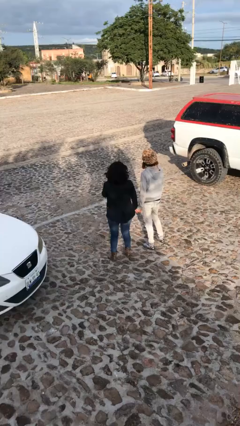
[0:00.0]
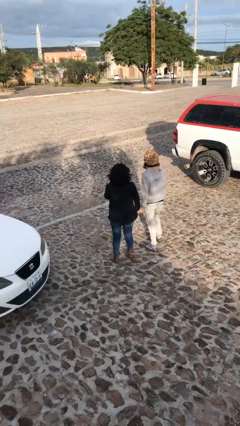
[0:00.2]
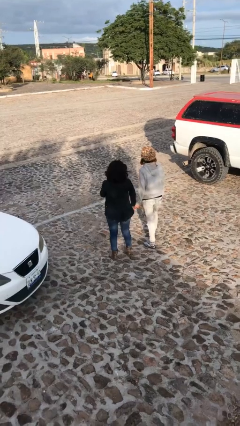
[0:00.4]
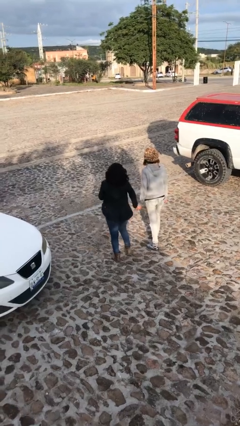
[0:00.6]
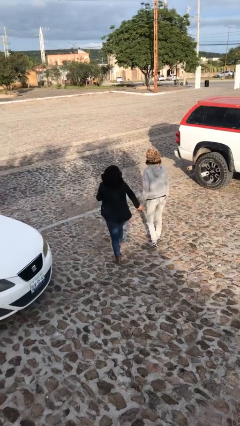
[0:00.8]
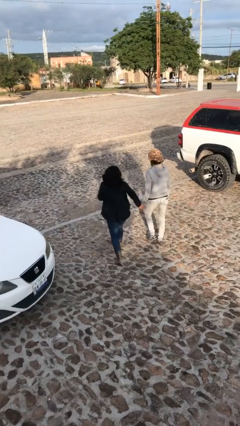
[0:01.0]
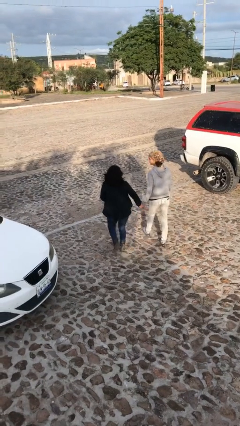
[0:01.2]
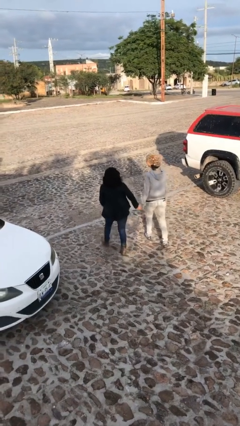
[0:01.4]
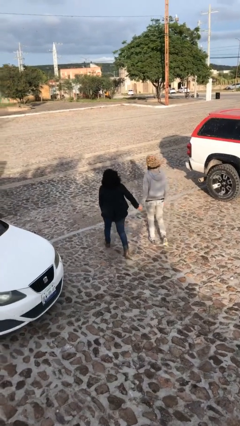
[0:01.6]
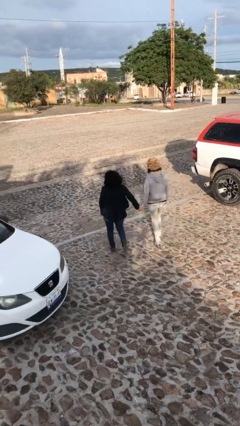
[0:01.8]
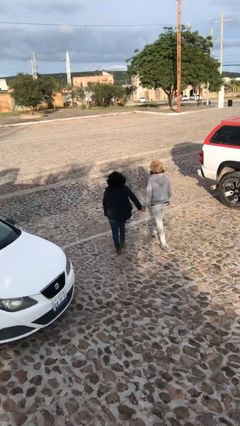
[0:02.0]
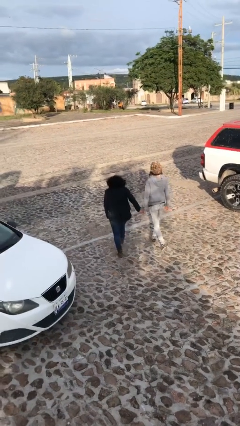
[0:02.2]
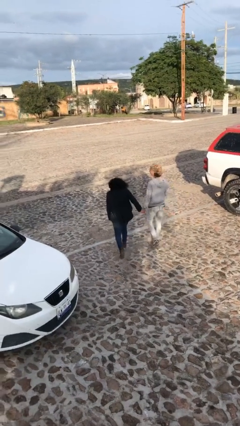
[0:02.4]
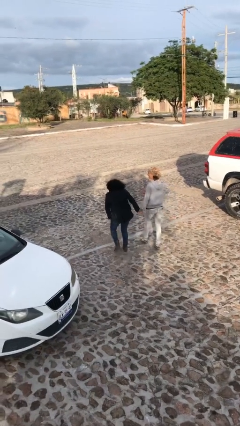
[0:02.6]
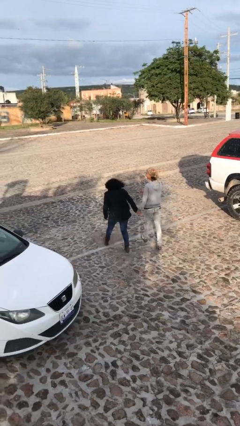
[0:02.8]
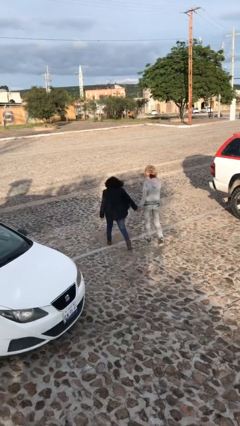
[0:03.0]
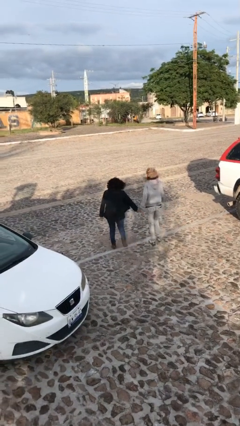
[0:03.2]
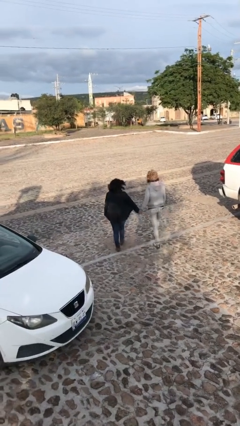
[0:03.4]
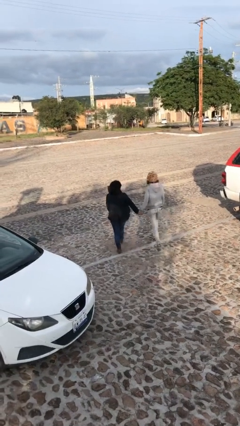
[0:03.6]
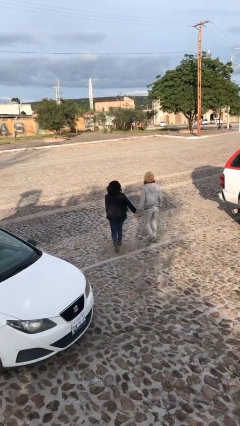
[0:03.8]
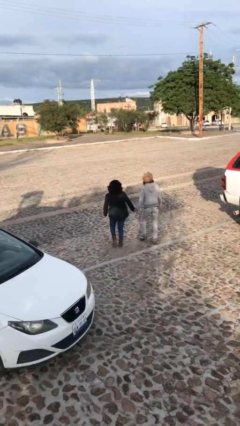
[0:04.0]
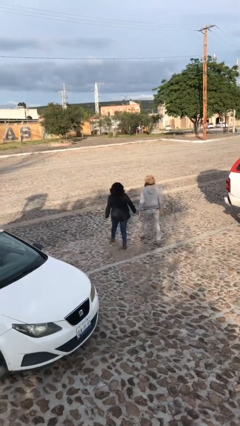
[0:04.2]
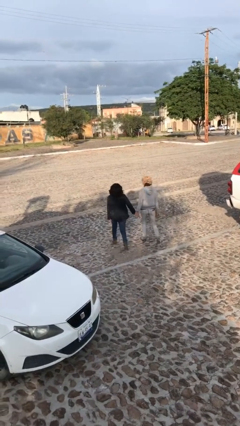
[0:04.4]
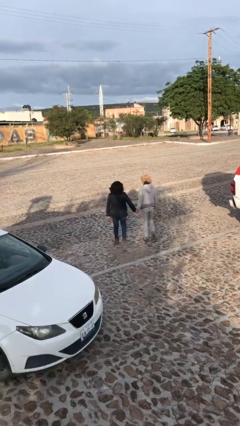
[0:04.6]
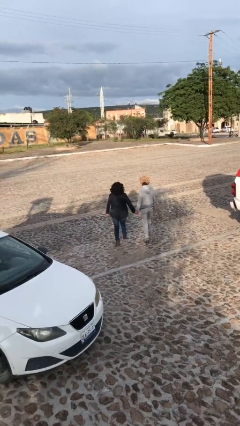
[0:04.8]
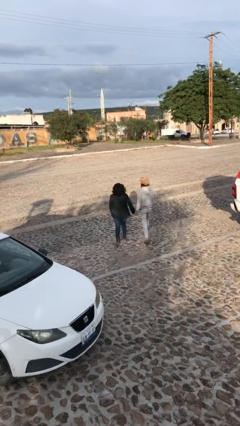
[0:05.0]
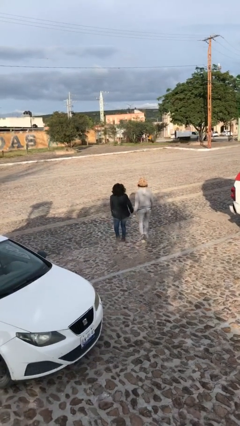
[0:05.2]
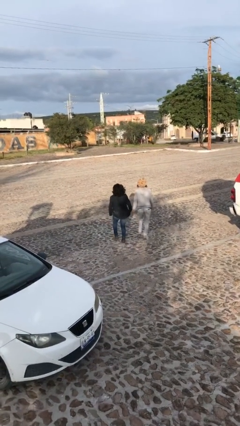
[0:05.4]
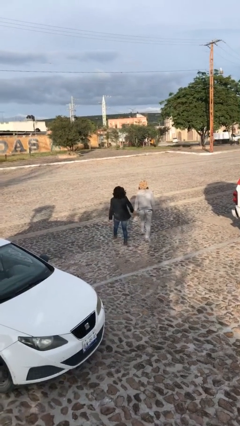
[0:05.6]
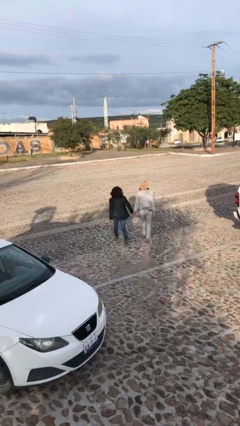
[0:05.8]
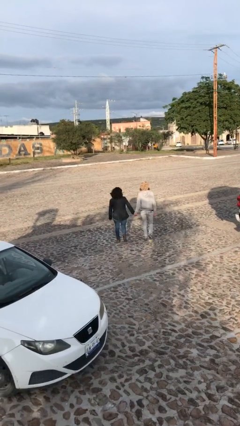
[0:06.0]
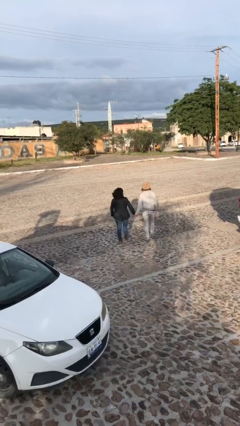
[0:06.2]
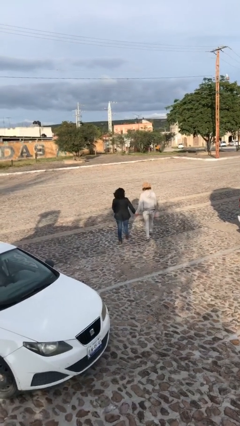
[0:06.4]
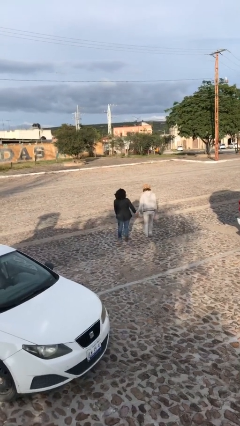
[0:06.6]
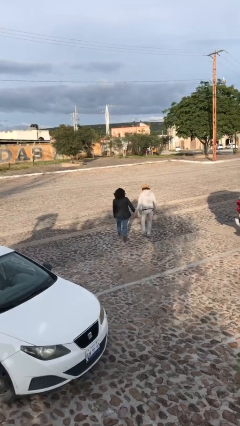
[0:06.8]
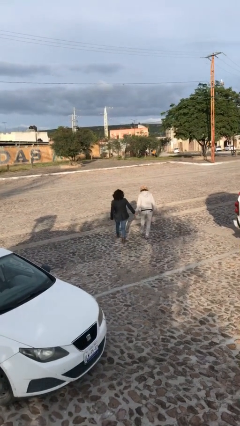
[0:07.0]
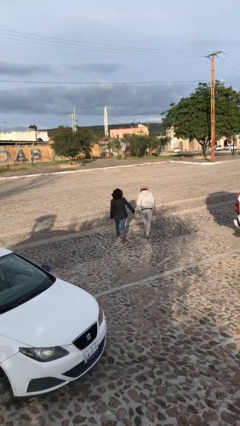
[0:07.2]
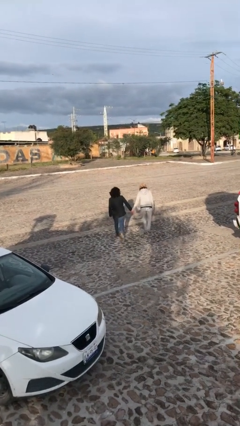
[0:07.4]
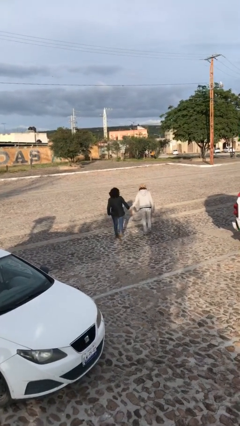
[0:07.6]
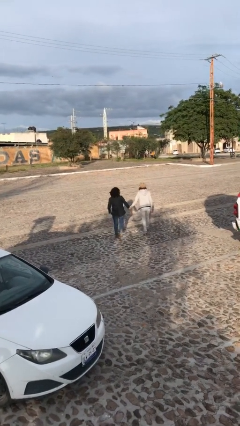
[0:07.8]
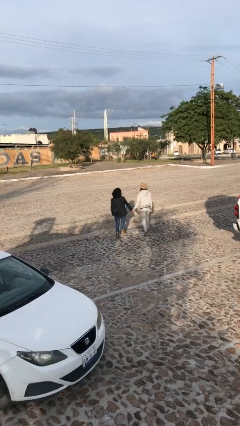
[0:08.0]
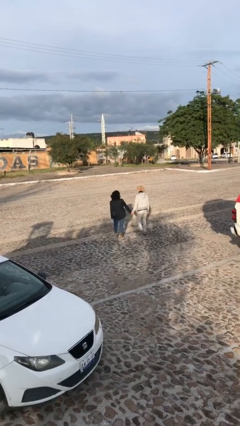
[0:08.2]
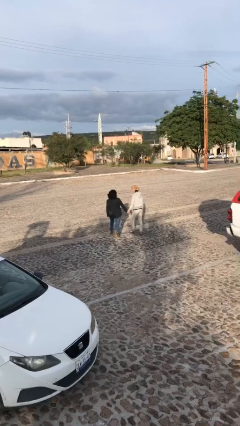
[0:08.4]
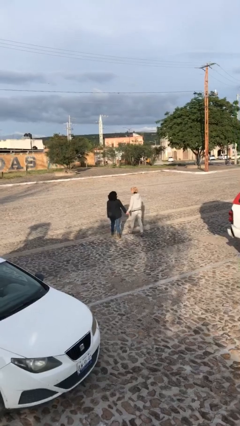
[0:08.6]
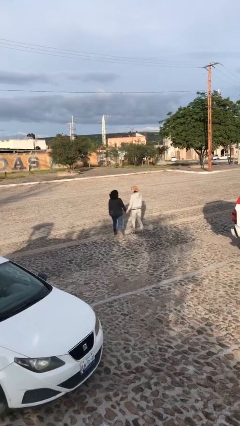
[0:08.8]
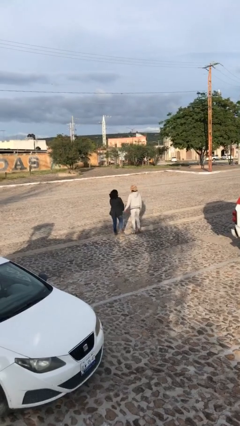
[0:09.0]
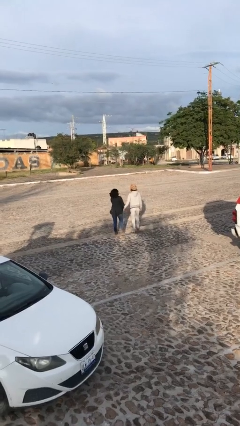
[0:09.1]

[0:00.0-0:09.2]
person holds hand

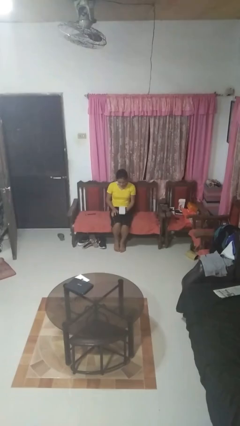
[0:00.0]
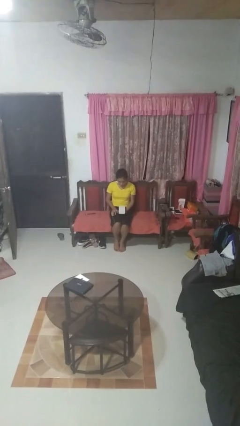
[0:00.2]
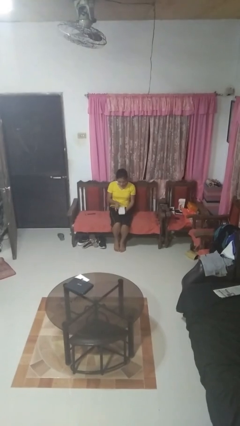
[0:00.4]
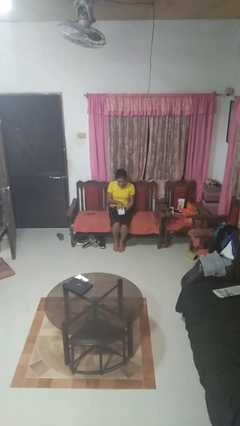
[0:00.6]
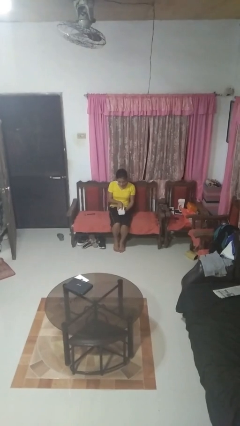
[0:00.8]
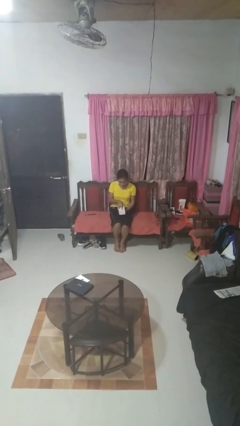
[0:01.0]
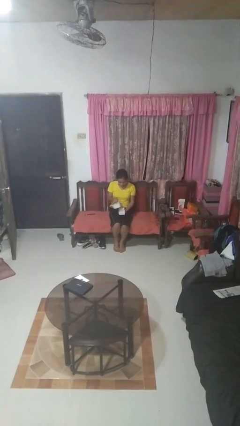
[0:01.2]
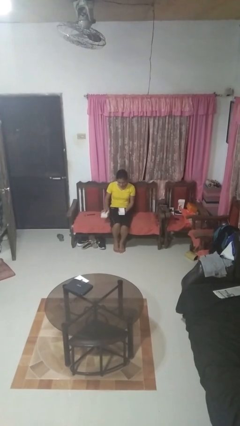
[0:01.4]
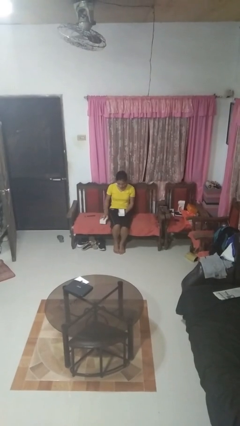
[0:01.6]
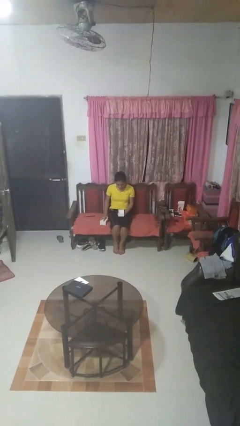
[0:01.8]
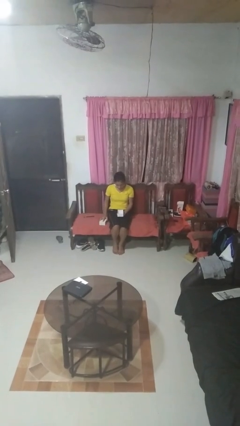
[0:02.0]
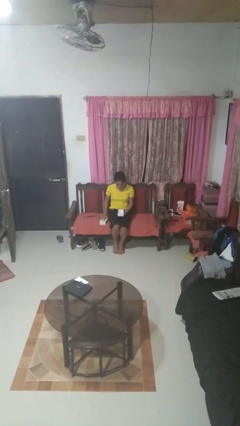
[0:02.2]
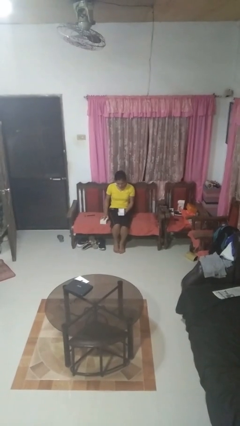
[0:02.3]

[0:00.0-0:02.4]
person opens jewelry box

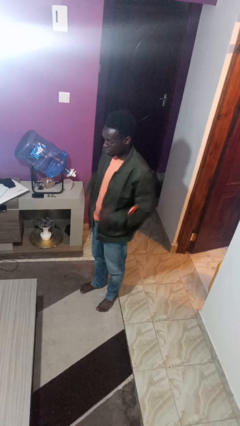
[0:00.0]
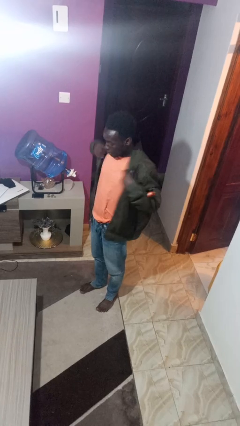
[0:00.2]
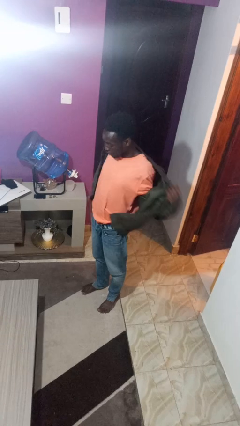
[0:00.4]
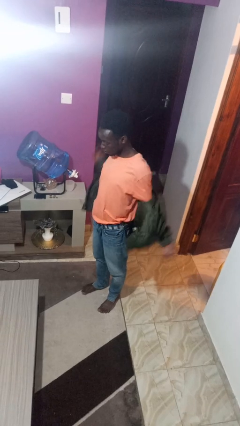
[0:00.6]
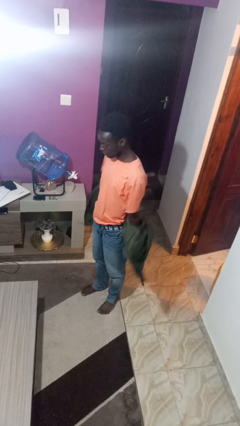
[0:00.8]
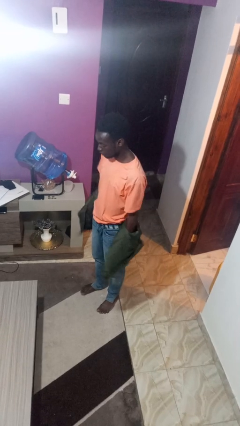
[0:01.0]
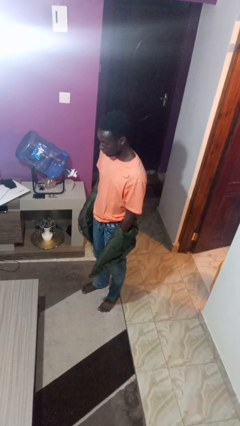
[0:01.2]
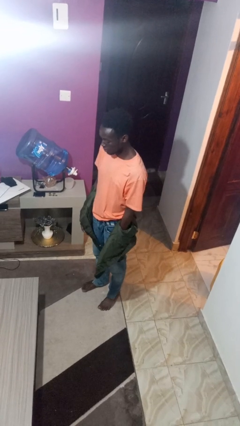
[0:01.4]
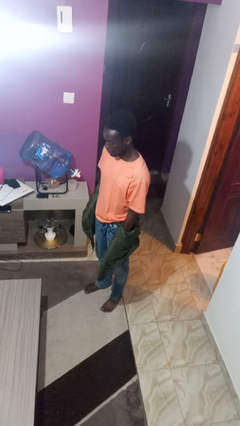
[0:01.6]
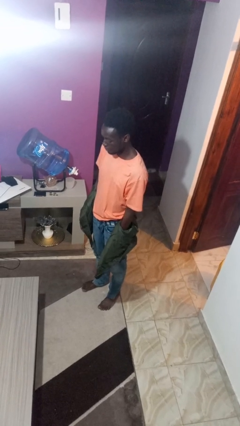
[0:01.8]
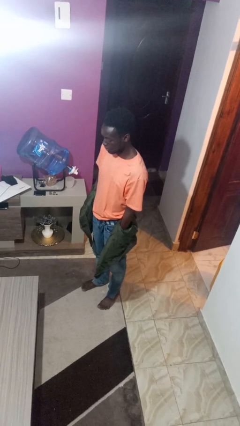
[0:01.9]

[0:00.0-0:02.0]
person takes off jacket

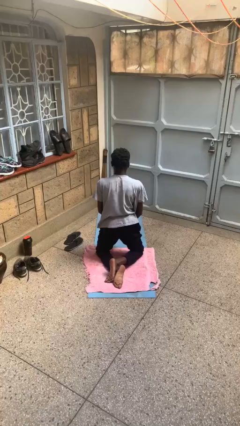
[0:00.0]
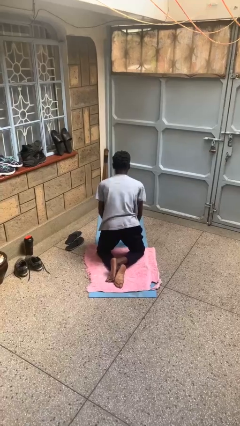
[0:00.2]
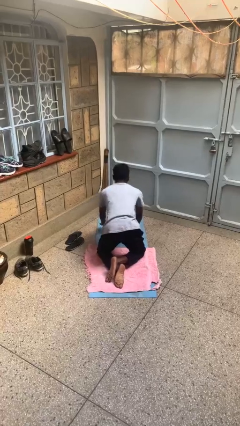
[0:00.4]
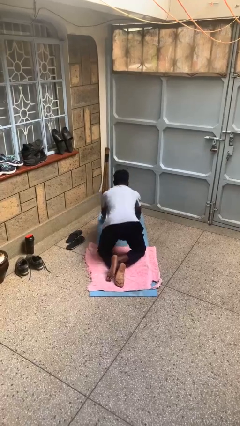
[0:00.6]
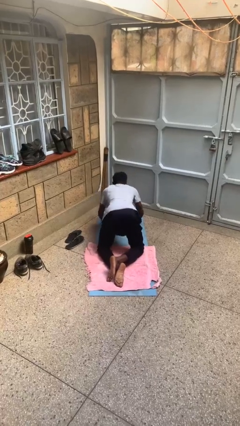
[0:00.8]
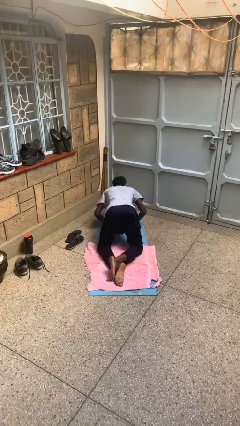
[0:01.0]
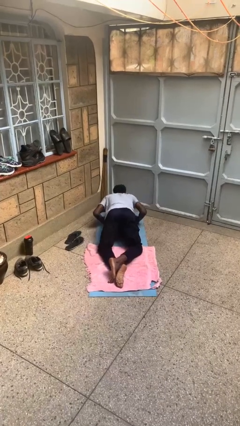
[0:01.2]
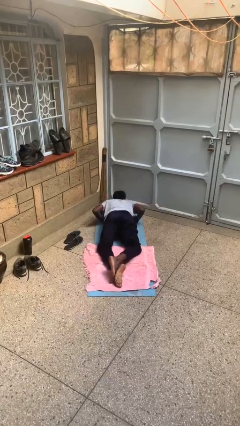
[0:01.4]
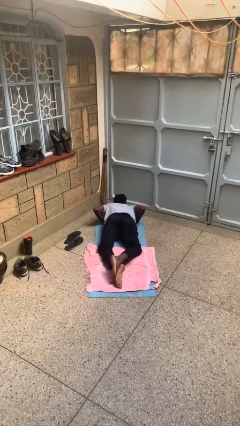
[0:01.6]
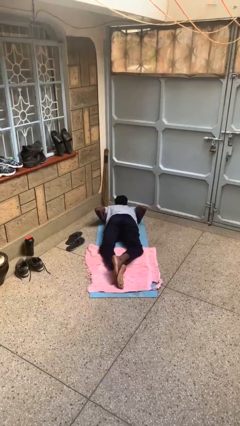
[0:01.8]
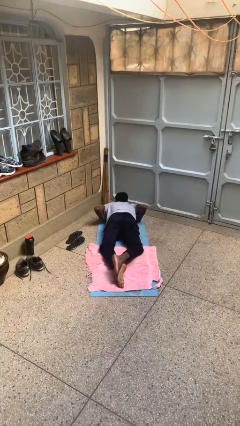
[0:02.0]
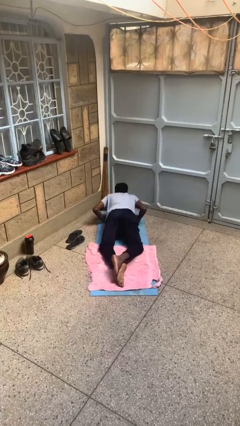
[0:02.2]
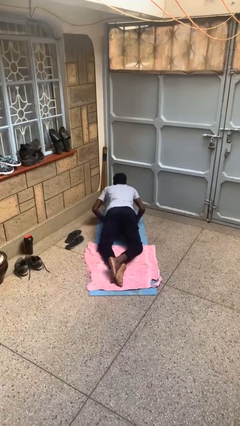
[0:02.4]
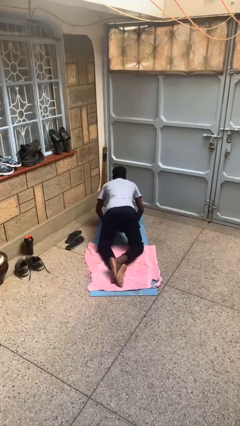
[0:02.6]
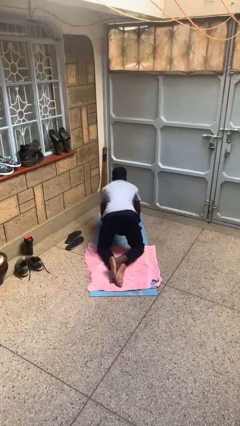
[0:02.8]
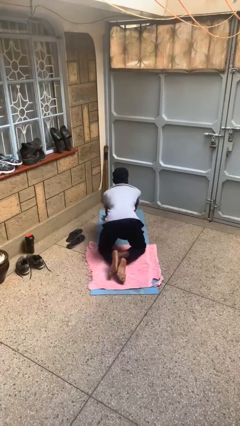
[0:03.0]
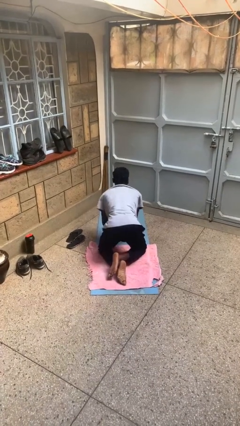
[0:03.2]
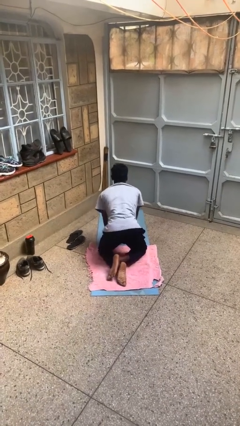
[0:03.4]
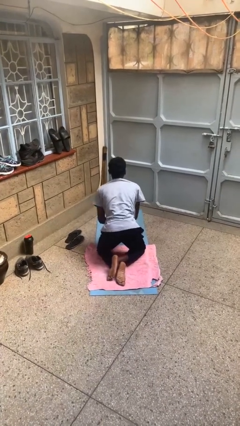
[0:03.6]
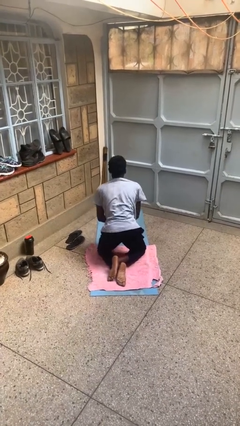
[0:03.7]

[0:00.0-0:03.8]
person exercises with pushup
